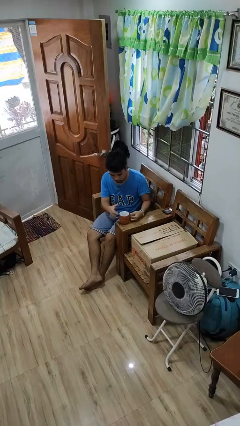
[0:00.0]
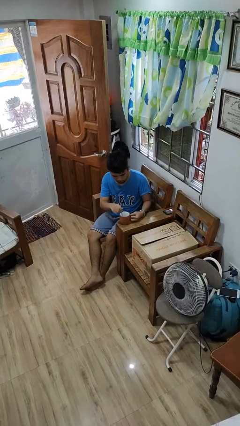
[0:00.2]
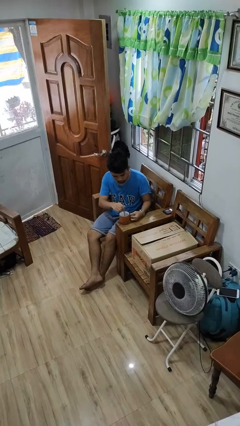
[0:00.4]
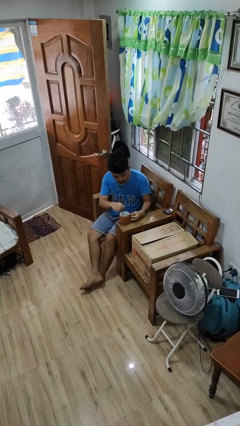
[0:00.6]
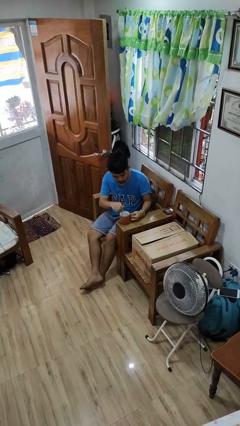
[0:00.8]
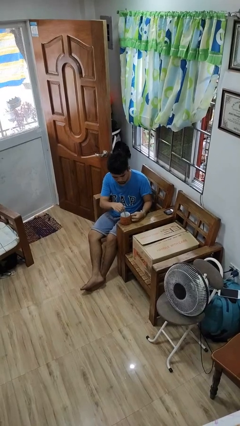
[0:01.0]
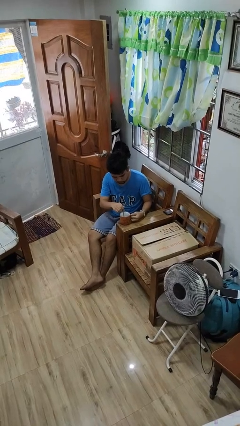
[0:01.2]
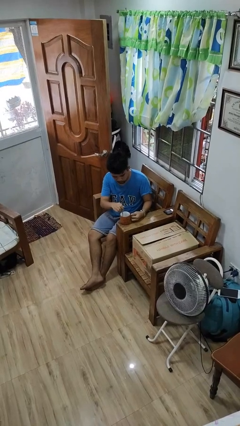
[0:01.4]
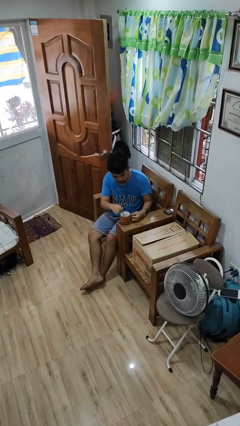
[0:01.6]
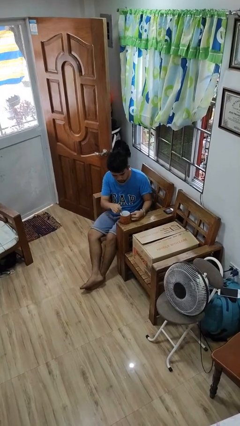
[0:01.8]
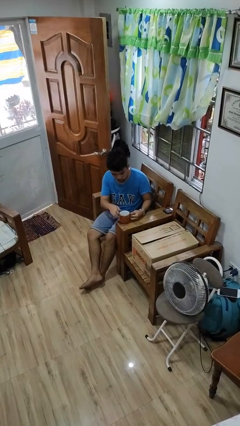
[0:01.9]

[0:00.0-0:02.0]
person stirs mug

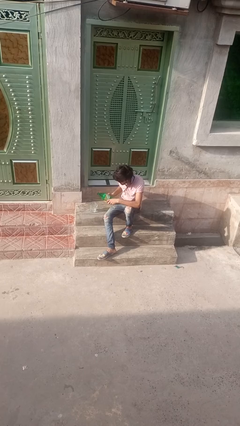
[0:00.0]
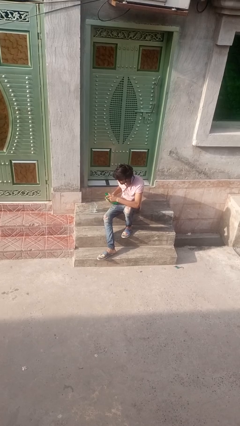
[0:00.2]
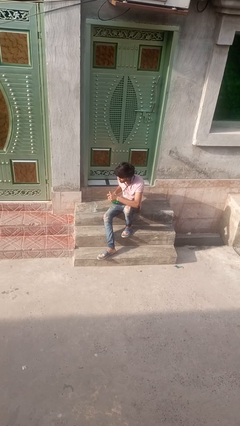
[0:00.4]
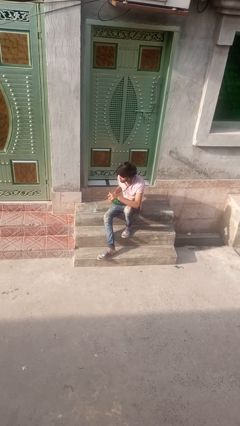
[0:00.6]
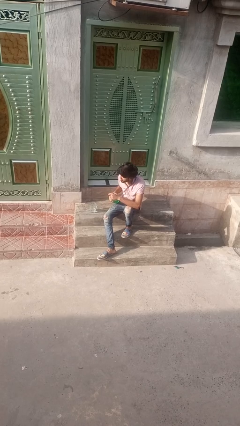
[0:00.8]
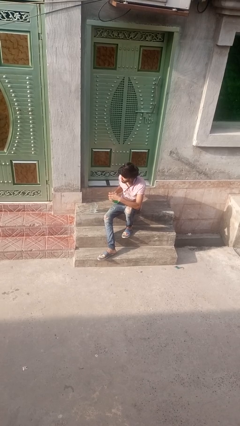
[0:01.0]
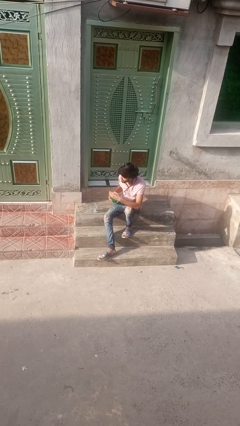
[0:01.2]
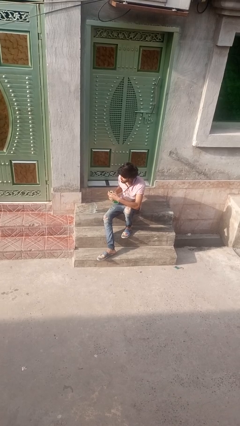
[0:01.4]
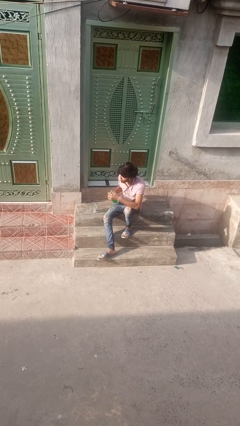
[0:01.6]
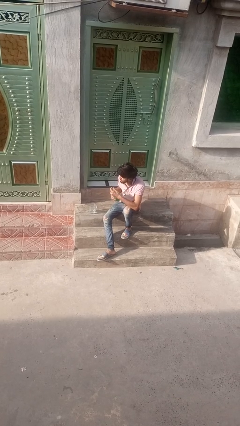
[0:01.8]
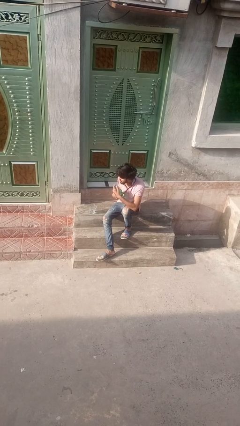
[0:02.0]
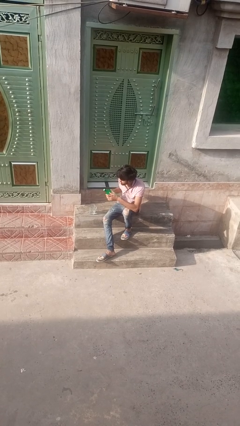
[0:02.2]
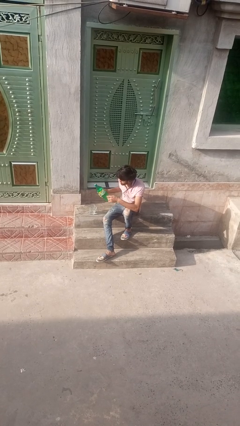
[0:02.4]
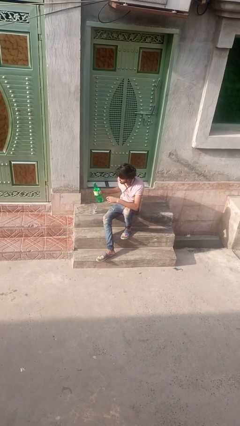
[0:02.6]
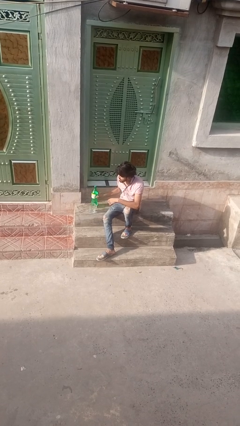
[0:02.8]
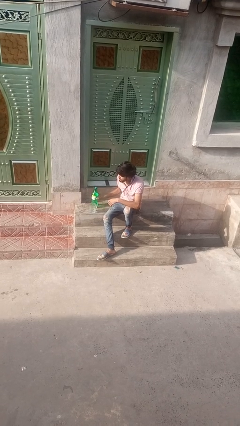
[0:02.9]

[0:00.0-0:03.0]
person screws lid to bottle

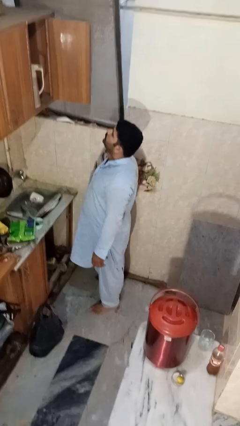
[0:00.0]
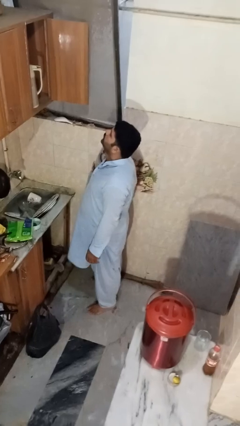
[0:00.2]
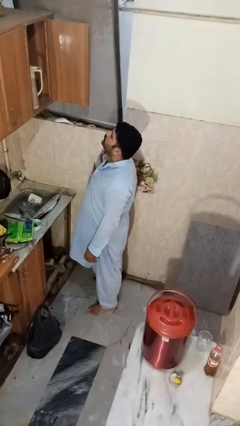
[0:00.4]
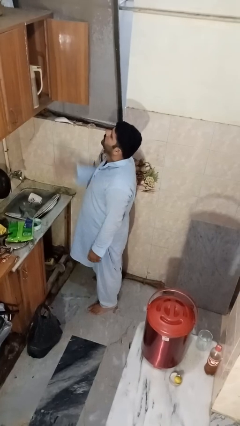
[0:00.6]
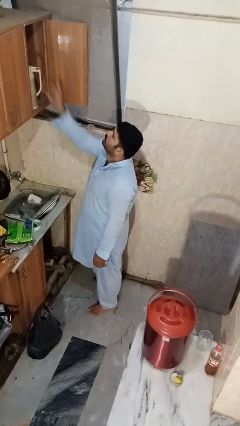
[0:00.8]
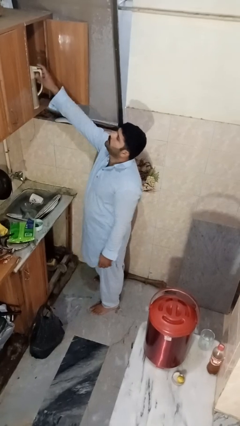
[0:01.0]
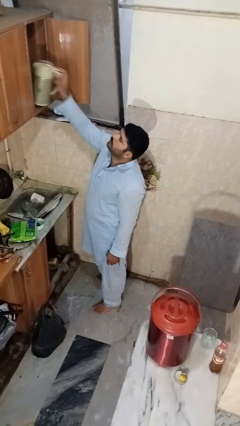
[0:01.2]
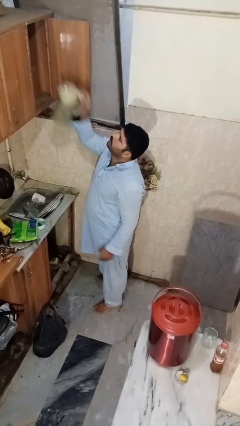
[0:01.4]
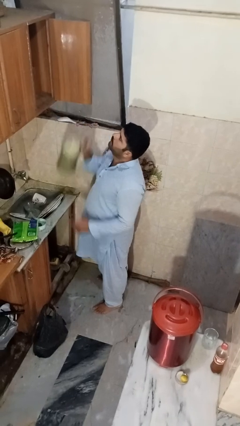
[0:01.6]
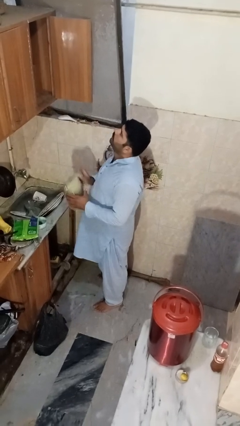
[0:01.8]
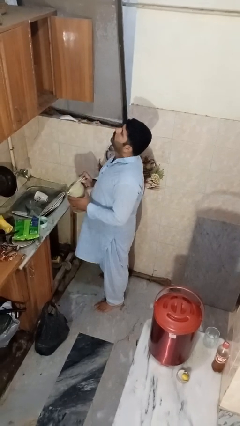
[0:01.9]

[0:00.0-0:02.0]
person takes object from cabinet

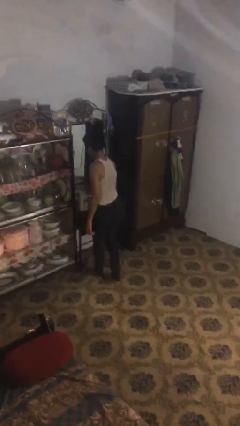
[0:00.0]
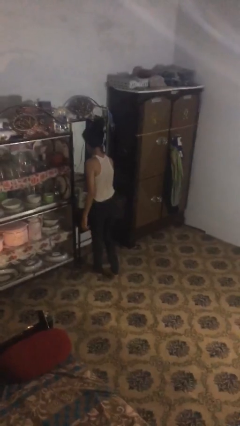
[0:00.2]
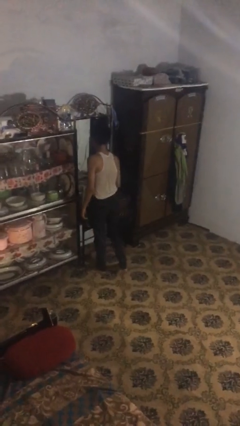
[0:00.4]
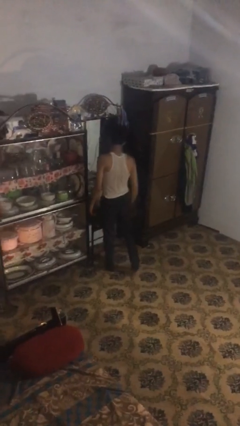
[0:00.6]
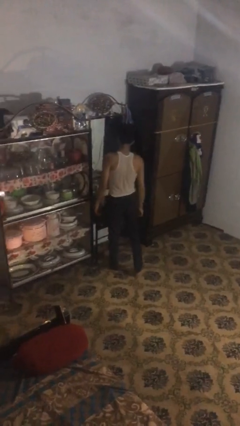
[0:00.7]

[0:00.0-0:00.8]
person puts down object on table

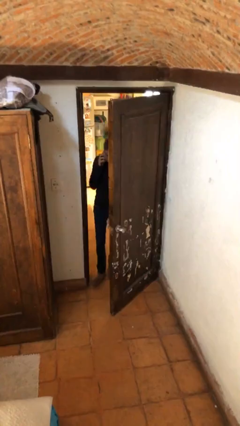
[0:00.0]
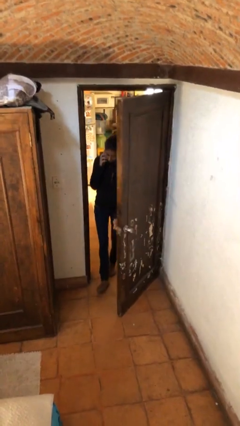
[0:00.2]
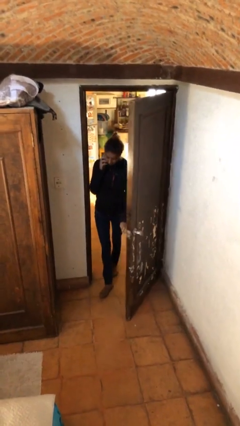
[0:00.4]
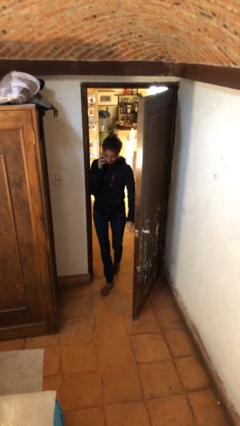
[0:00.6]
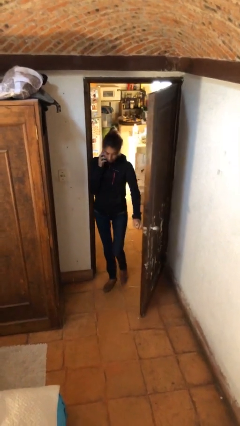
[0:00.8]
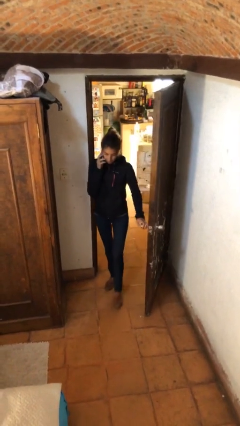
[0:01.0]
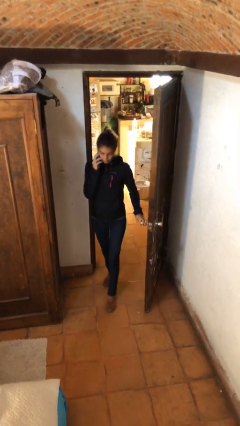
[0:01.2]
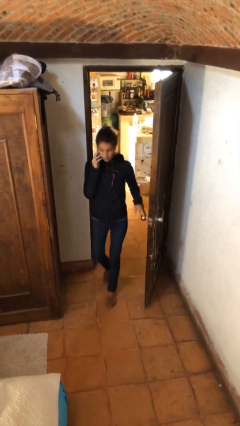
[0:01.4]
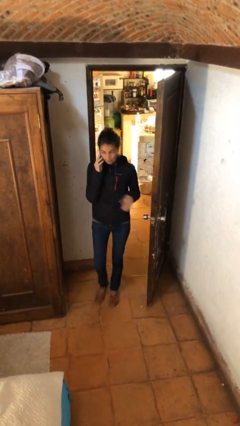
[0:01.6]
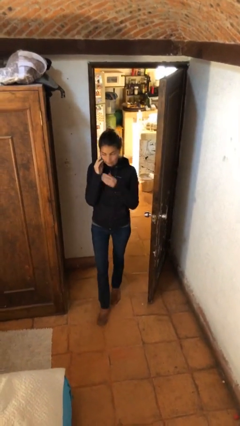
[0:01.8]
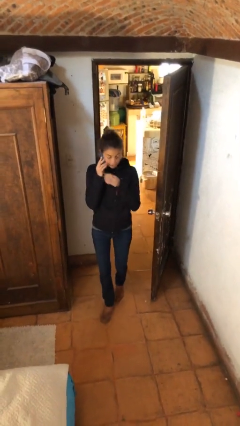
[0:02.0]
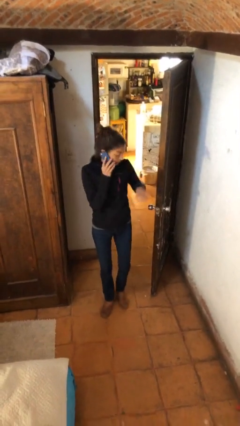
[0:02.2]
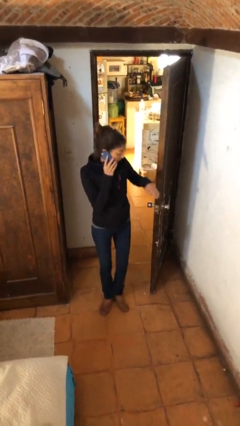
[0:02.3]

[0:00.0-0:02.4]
person enters scene through structure

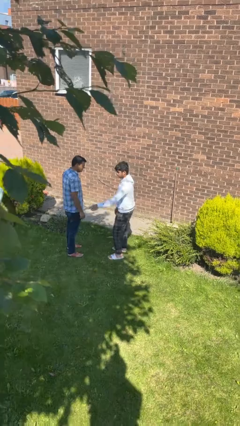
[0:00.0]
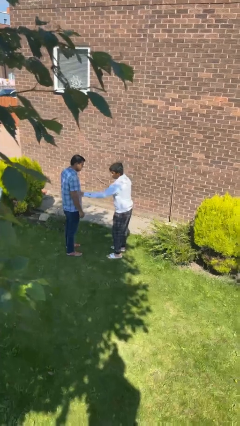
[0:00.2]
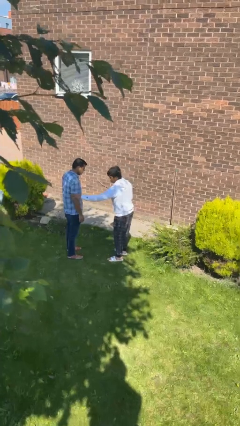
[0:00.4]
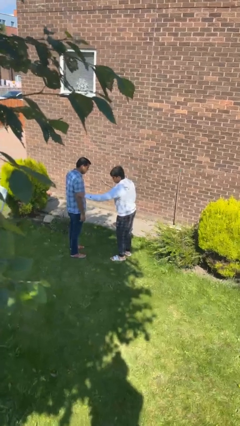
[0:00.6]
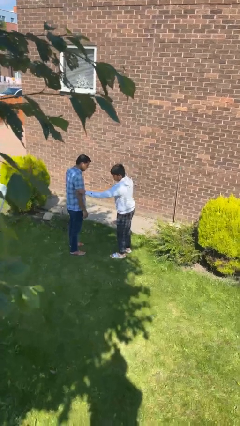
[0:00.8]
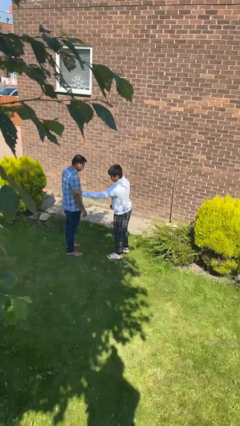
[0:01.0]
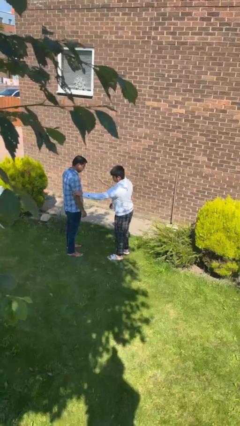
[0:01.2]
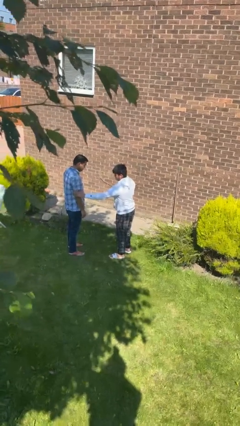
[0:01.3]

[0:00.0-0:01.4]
person grabs person by bicep

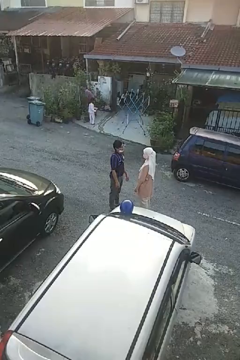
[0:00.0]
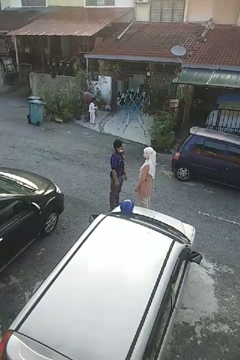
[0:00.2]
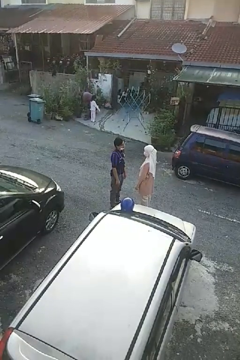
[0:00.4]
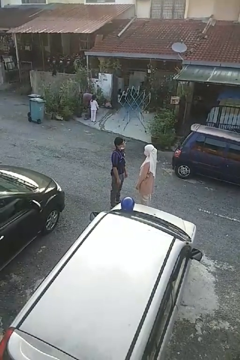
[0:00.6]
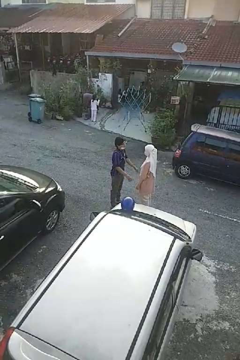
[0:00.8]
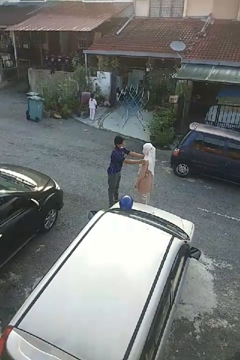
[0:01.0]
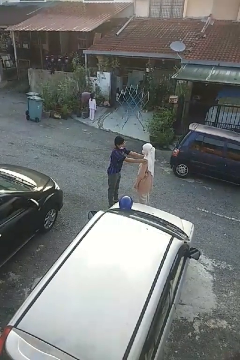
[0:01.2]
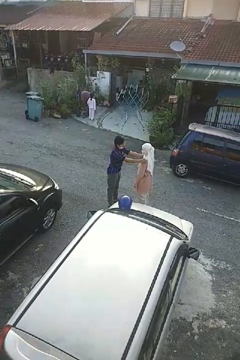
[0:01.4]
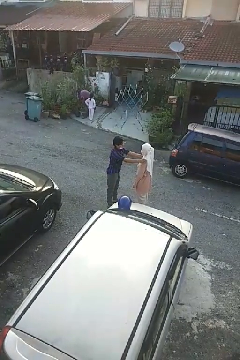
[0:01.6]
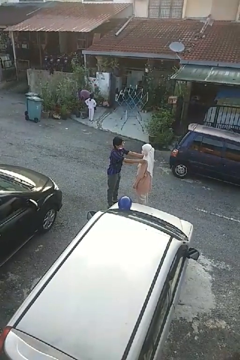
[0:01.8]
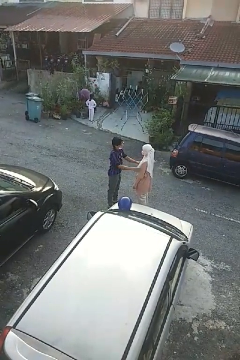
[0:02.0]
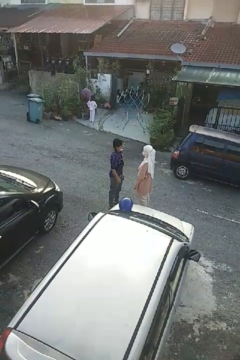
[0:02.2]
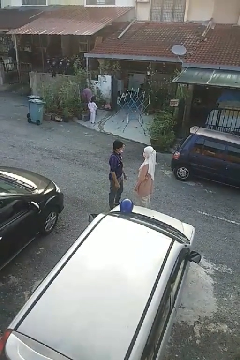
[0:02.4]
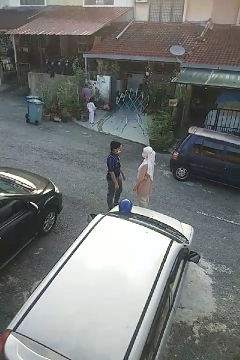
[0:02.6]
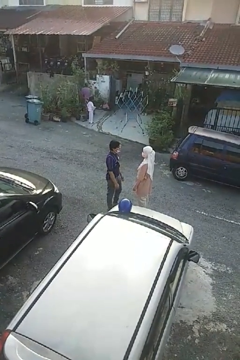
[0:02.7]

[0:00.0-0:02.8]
person pounds shoulders of person

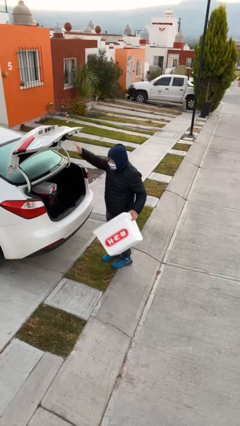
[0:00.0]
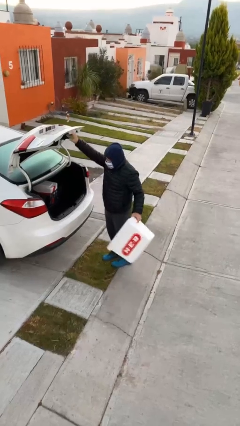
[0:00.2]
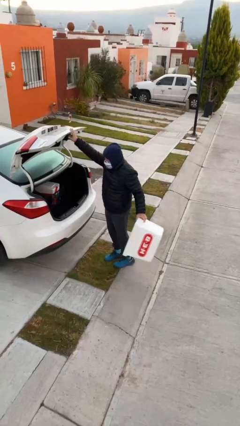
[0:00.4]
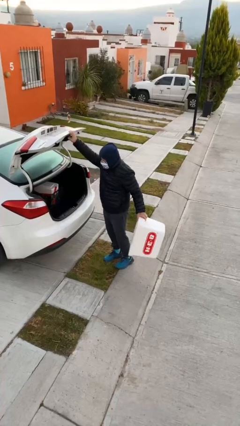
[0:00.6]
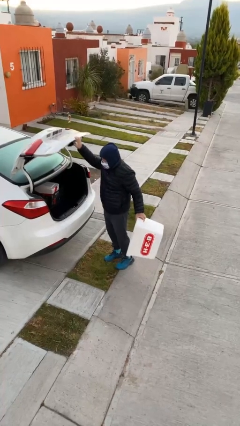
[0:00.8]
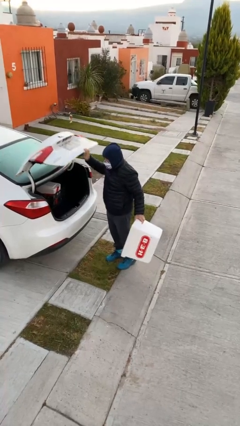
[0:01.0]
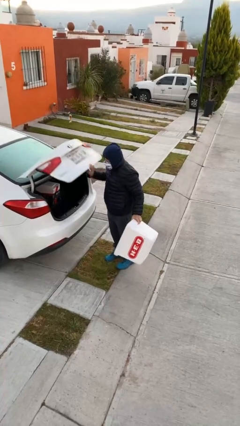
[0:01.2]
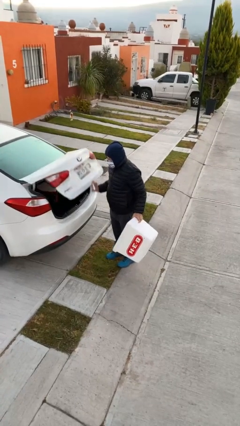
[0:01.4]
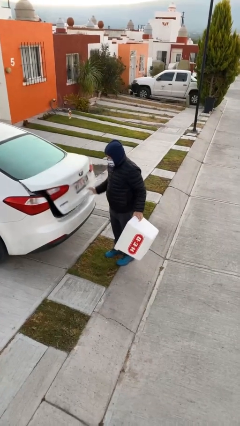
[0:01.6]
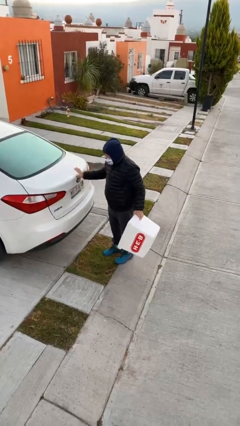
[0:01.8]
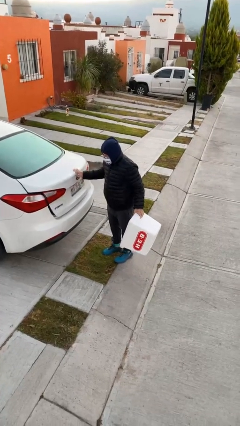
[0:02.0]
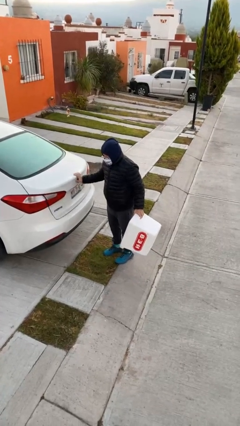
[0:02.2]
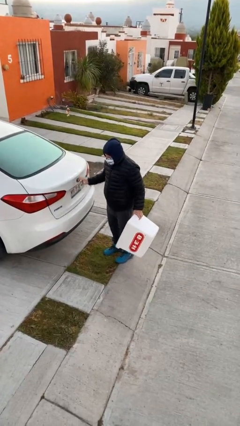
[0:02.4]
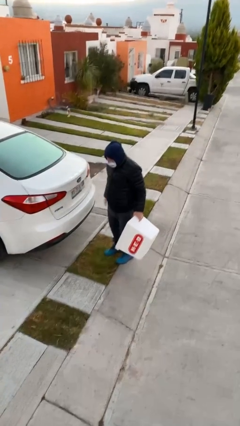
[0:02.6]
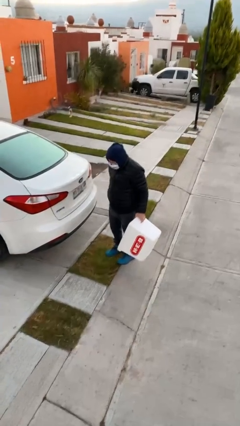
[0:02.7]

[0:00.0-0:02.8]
person closes car trunk

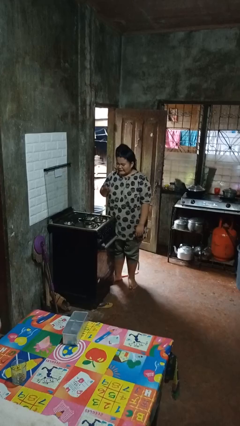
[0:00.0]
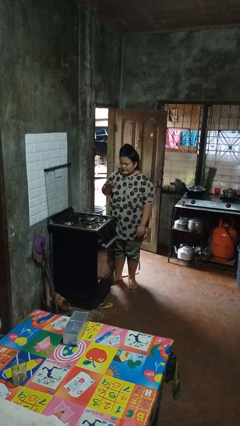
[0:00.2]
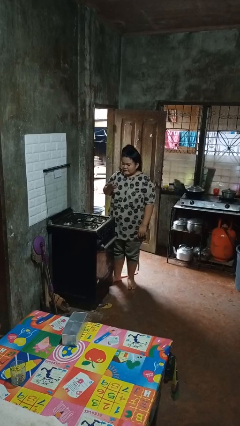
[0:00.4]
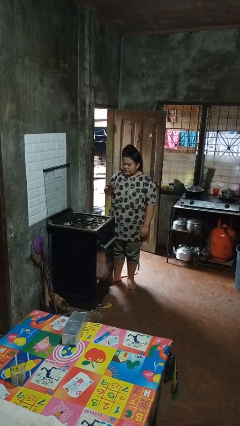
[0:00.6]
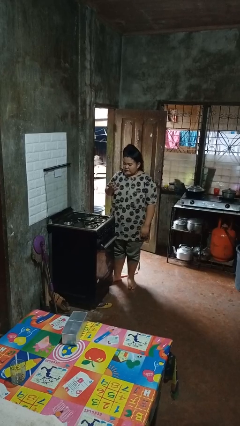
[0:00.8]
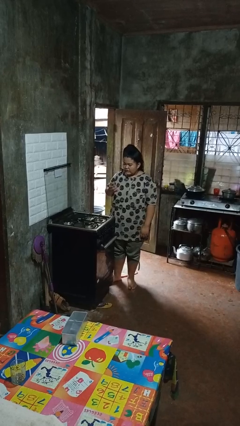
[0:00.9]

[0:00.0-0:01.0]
person burns hand
